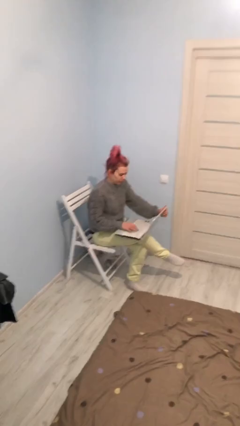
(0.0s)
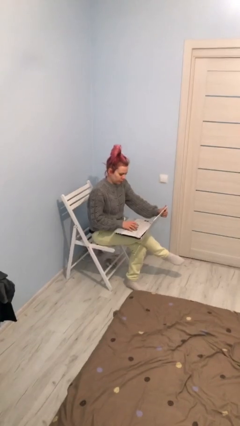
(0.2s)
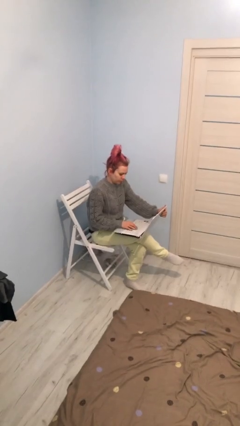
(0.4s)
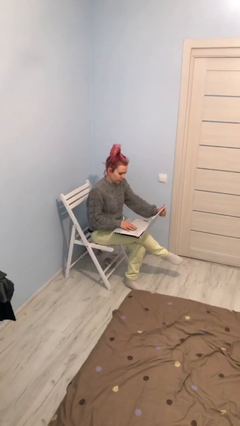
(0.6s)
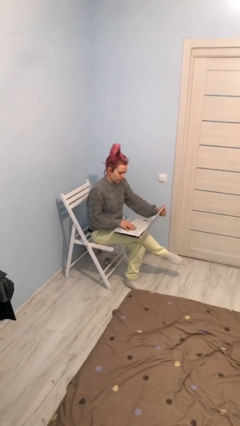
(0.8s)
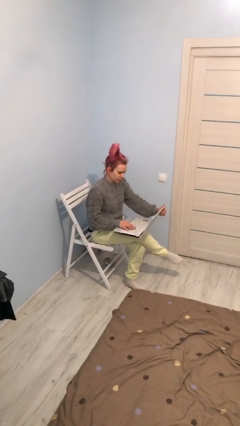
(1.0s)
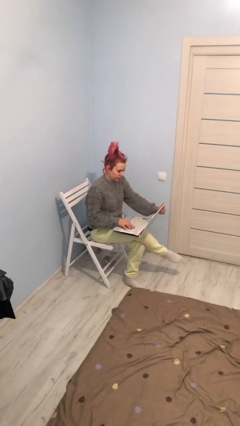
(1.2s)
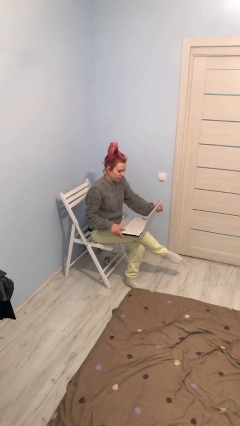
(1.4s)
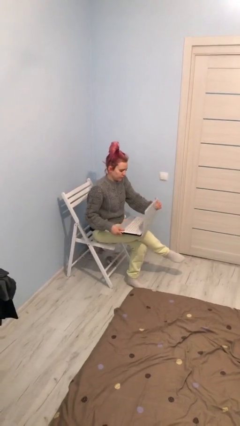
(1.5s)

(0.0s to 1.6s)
person interacts with laptop

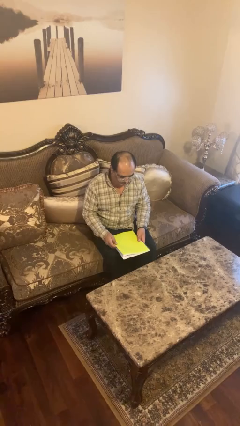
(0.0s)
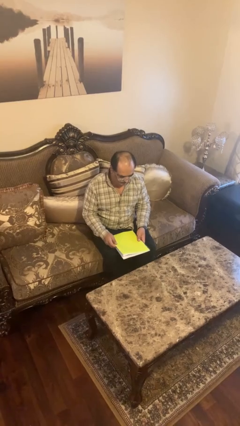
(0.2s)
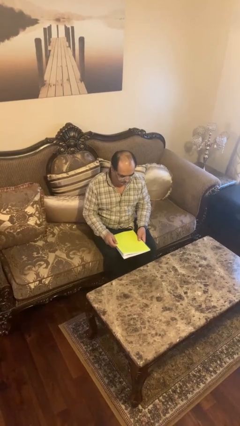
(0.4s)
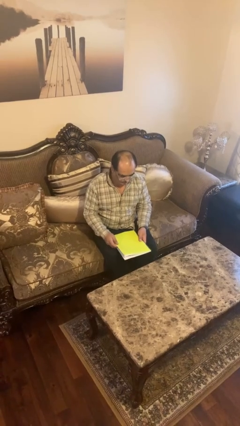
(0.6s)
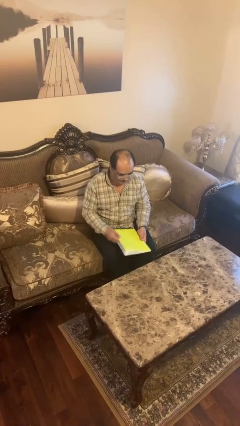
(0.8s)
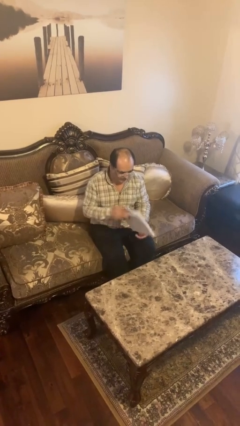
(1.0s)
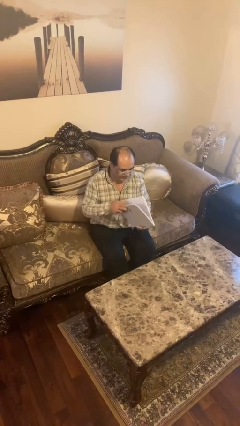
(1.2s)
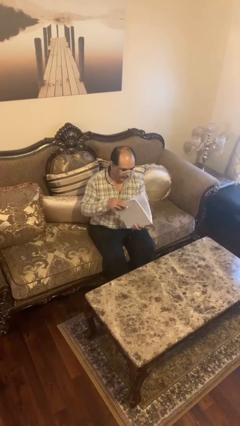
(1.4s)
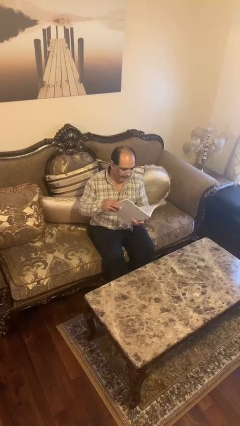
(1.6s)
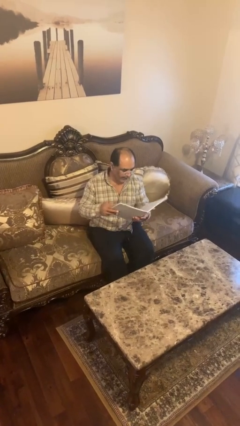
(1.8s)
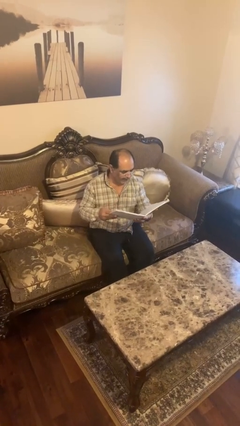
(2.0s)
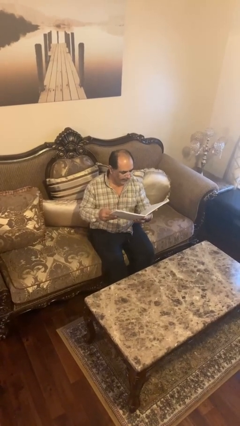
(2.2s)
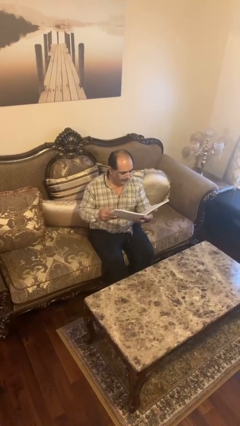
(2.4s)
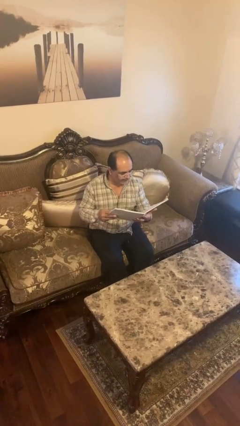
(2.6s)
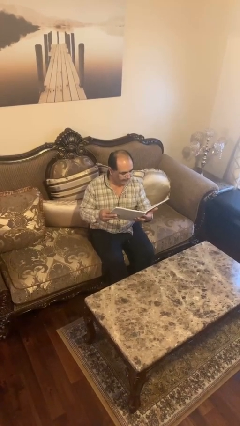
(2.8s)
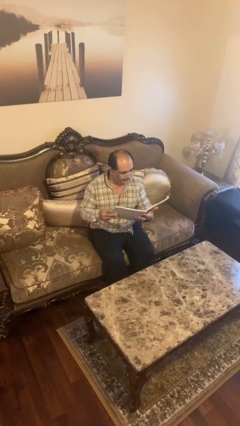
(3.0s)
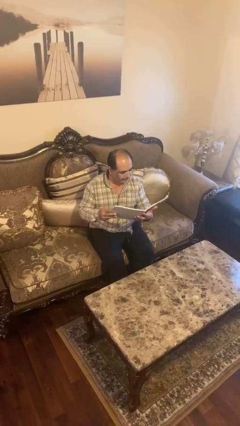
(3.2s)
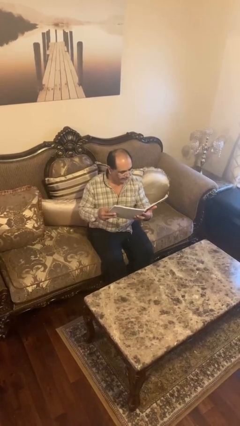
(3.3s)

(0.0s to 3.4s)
person reads document

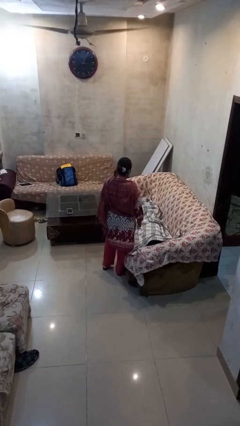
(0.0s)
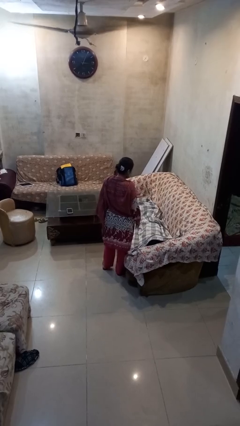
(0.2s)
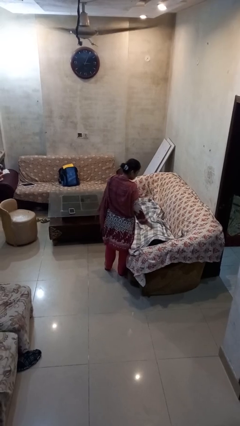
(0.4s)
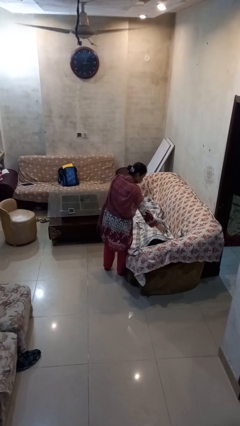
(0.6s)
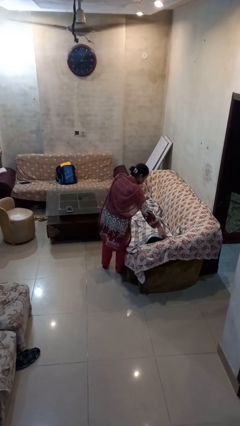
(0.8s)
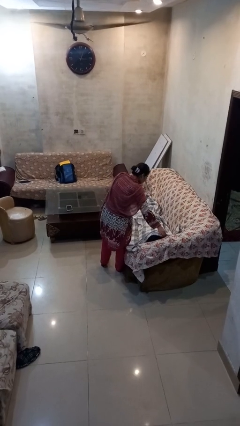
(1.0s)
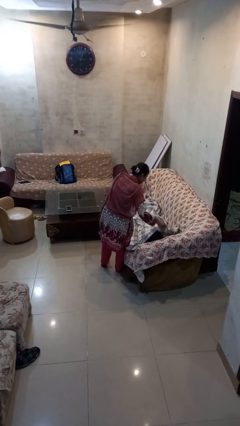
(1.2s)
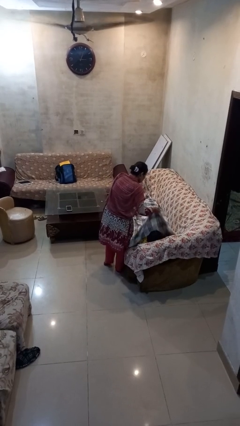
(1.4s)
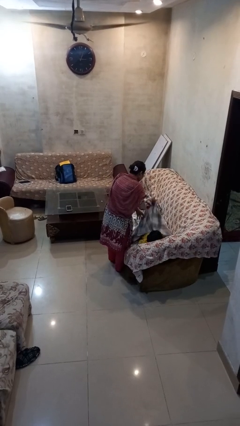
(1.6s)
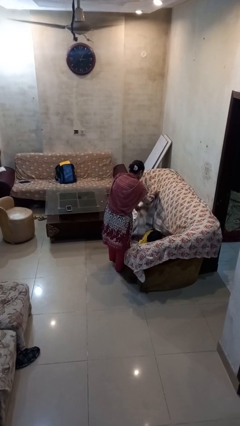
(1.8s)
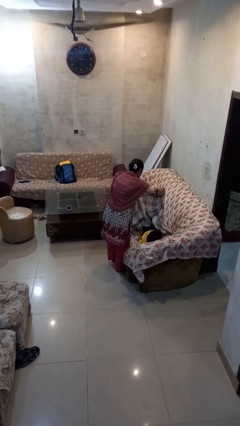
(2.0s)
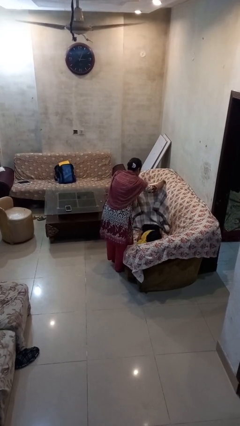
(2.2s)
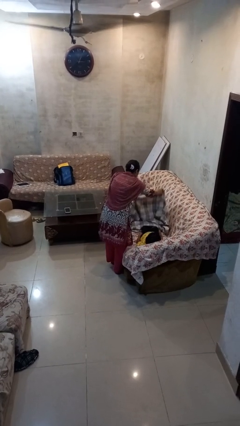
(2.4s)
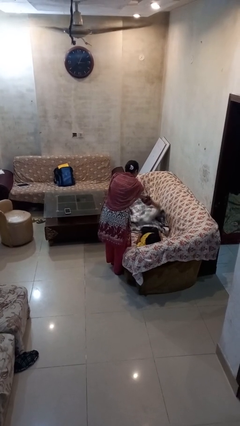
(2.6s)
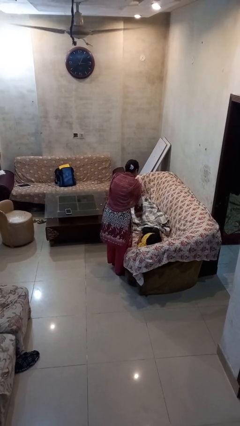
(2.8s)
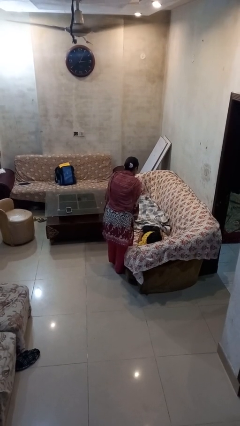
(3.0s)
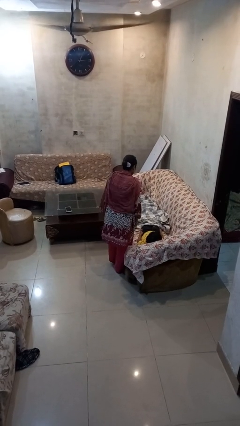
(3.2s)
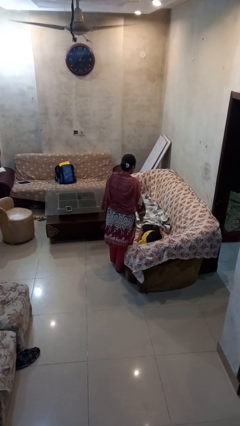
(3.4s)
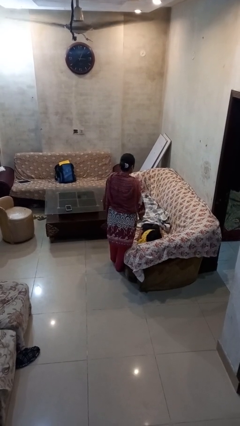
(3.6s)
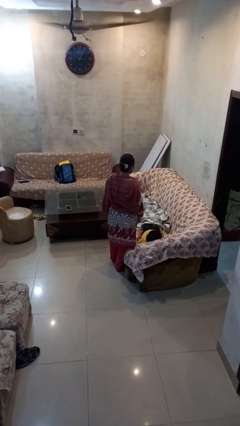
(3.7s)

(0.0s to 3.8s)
person uncovers friend with blanket

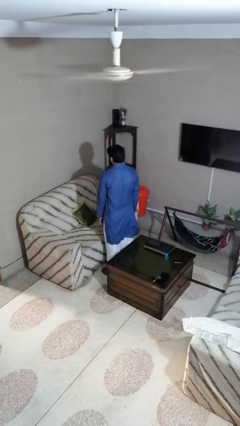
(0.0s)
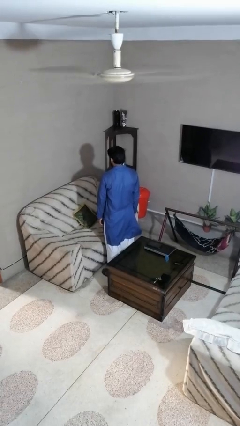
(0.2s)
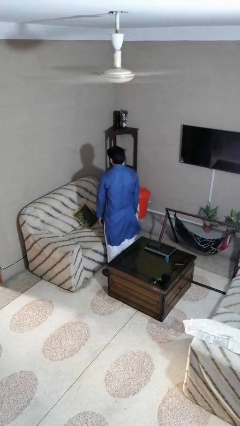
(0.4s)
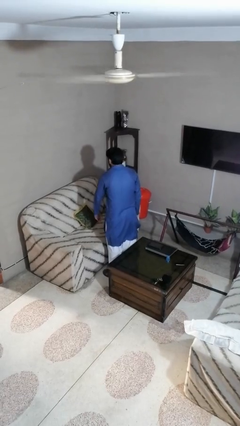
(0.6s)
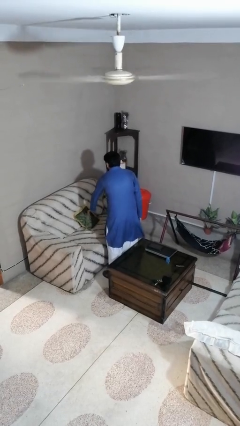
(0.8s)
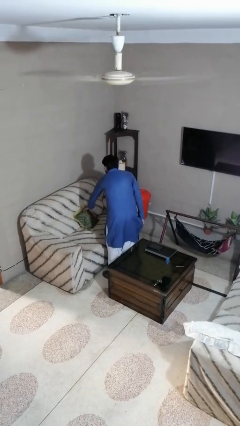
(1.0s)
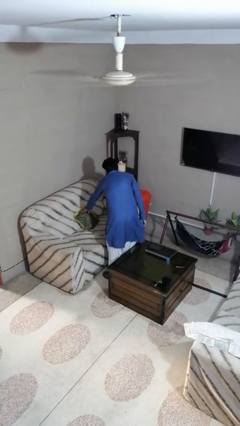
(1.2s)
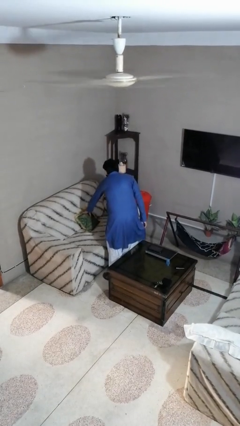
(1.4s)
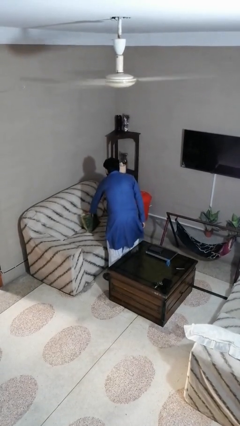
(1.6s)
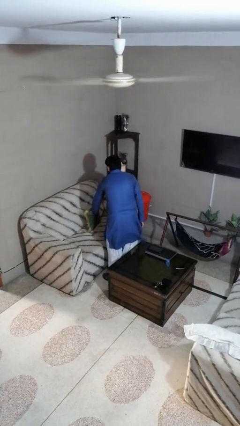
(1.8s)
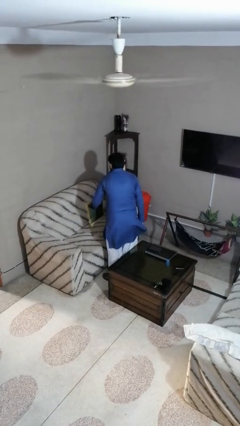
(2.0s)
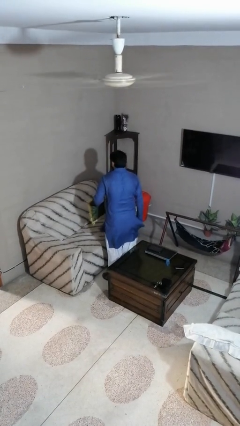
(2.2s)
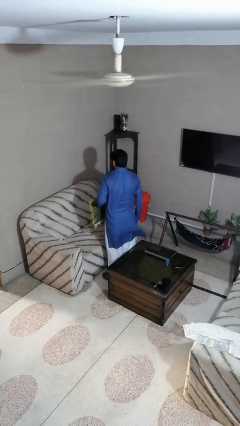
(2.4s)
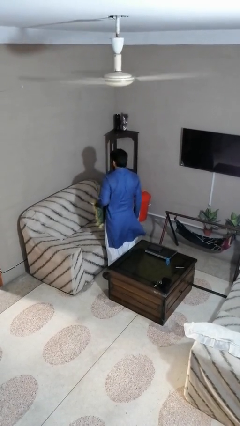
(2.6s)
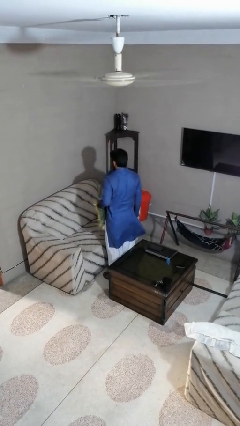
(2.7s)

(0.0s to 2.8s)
person picks up object from couch

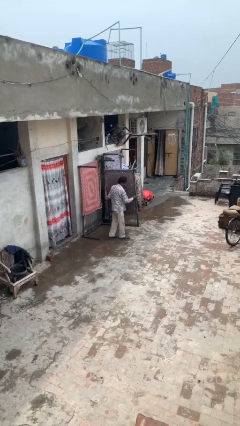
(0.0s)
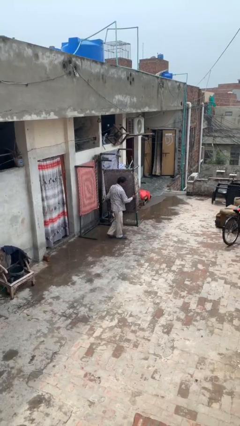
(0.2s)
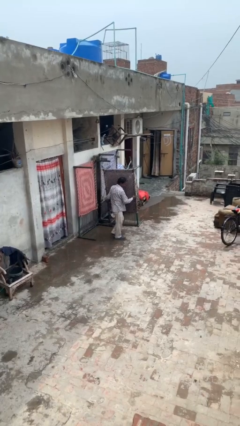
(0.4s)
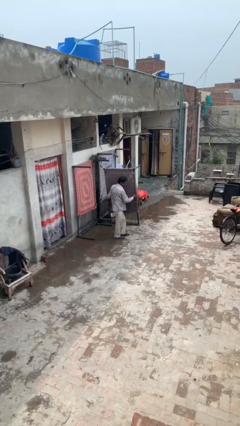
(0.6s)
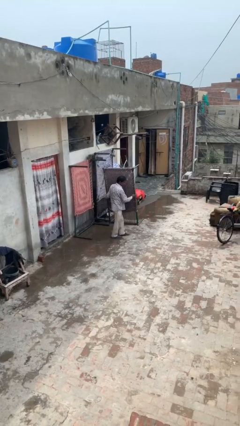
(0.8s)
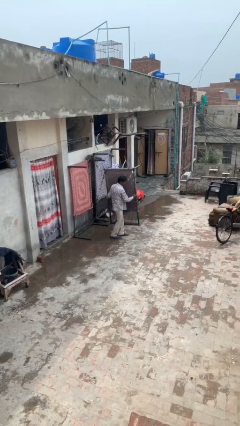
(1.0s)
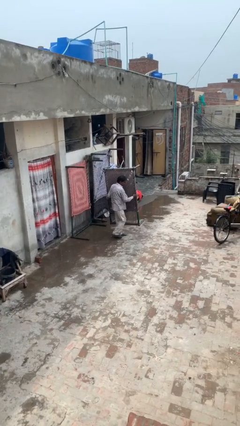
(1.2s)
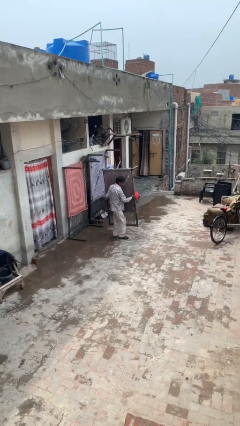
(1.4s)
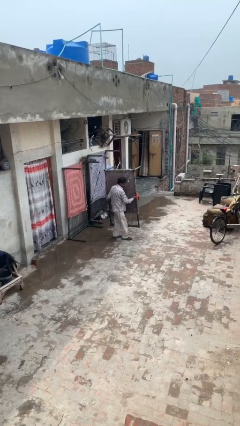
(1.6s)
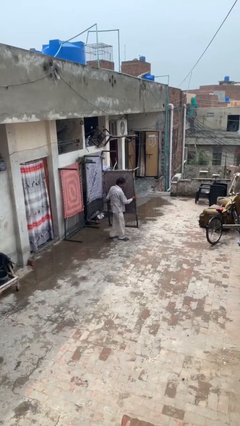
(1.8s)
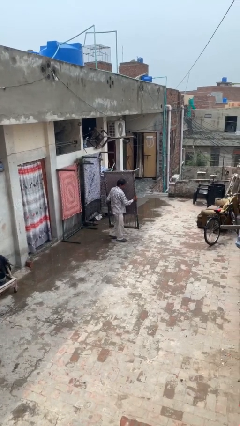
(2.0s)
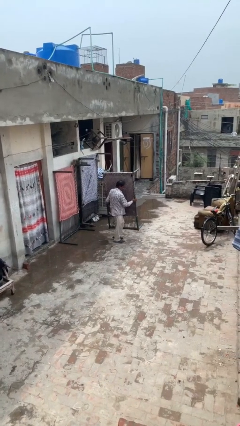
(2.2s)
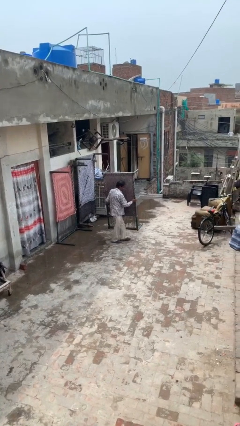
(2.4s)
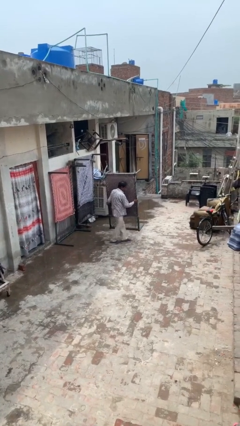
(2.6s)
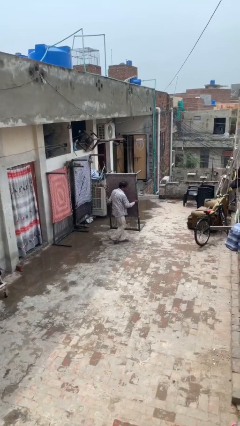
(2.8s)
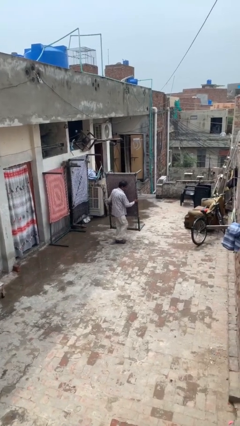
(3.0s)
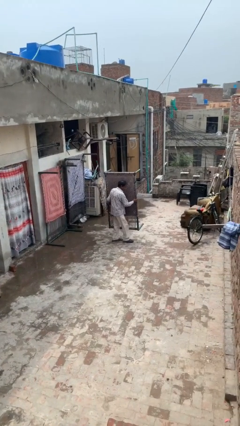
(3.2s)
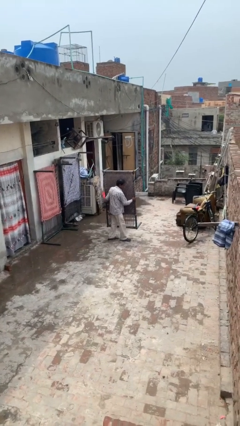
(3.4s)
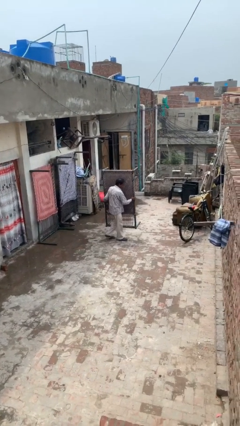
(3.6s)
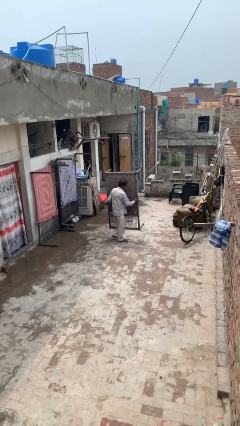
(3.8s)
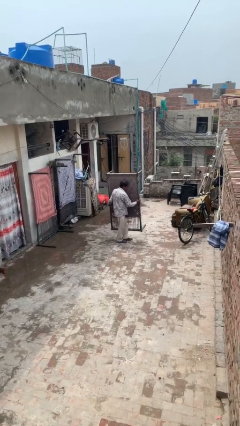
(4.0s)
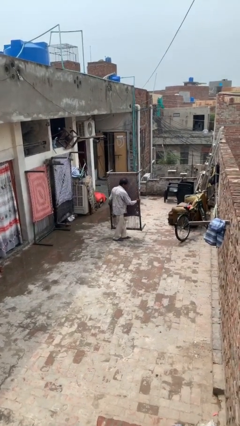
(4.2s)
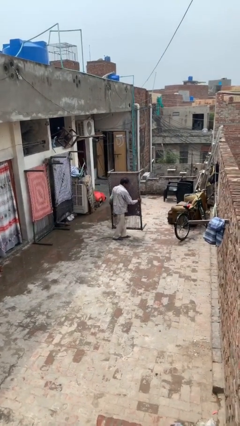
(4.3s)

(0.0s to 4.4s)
person carries heavy object

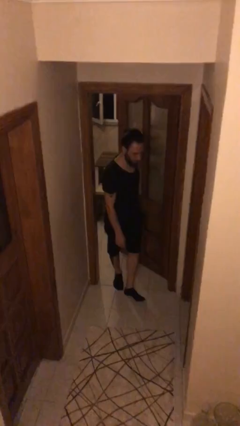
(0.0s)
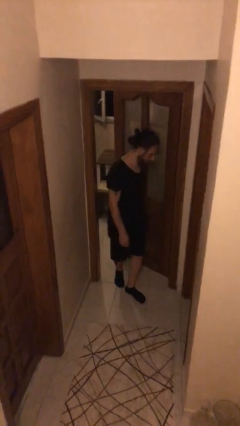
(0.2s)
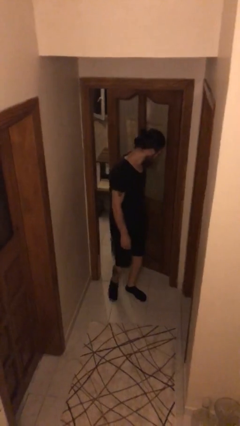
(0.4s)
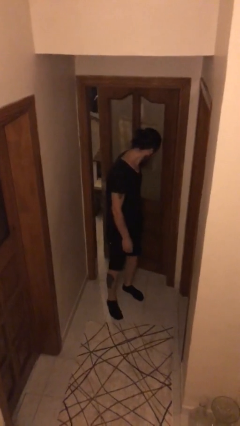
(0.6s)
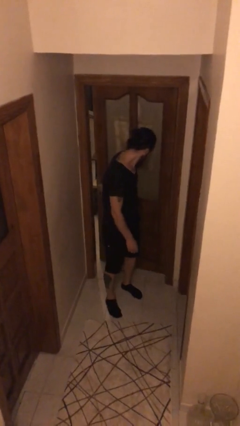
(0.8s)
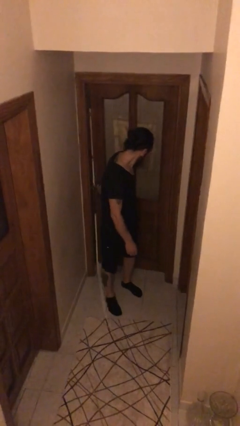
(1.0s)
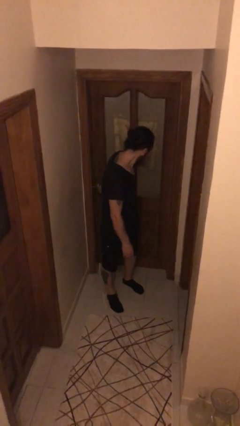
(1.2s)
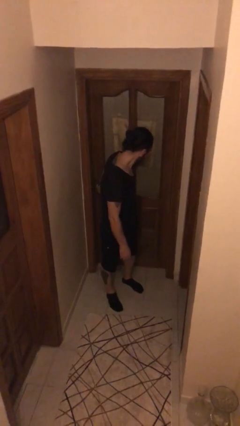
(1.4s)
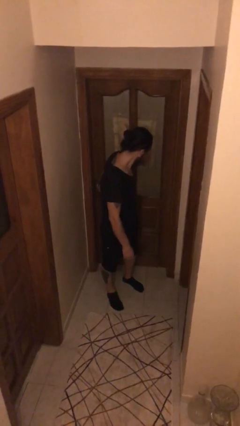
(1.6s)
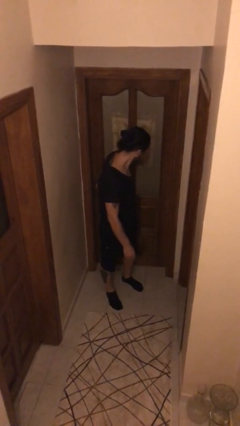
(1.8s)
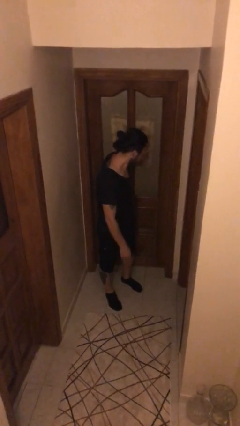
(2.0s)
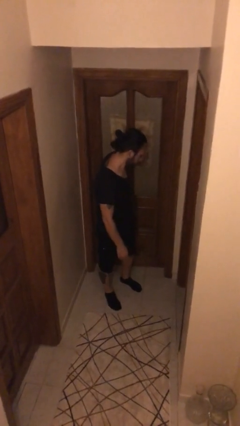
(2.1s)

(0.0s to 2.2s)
person closes facility door
